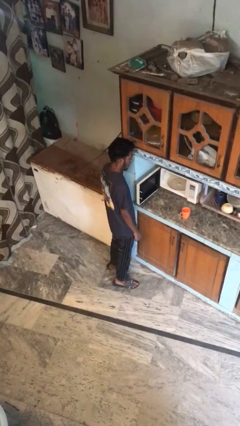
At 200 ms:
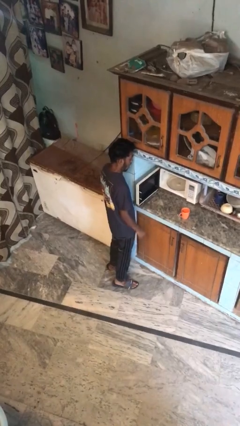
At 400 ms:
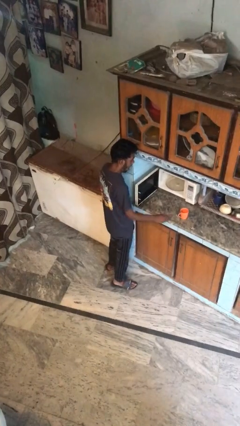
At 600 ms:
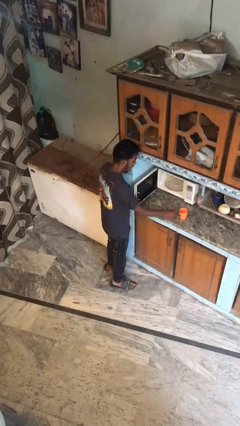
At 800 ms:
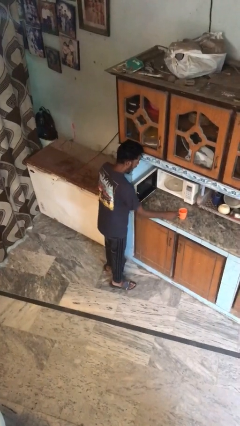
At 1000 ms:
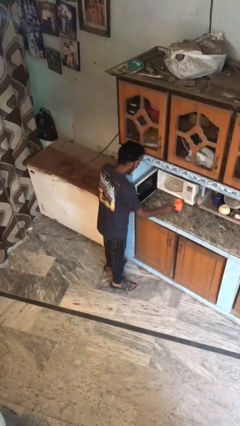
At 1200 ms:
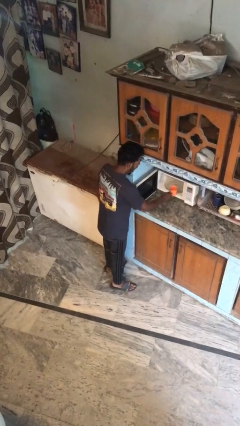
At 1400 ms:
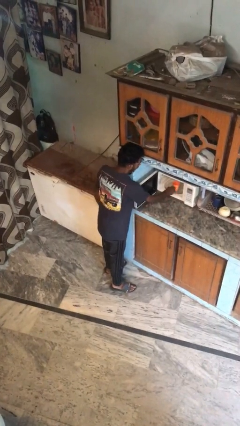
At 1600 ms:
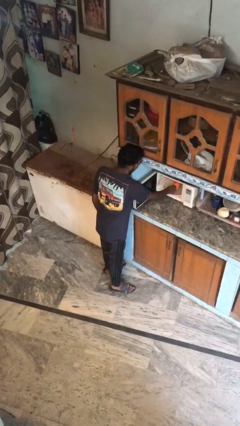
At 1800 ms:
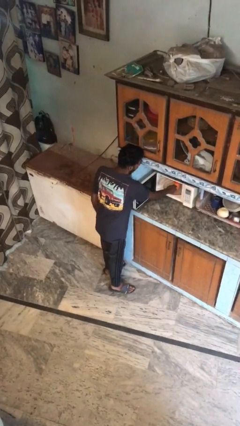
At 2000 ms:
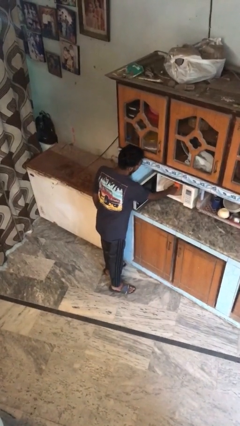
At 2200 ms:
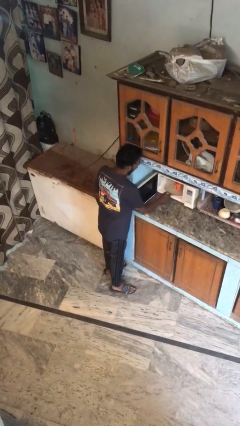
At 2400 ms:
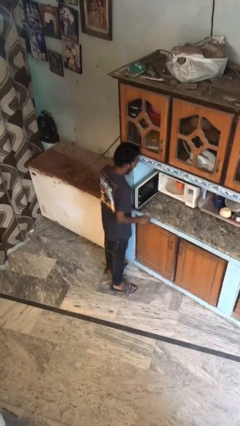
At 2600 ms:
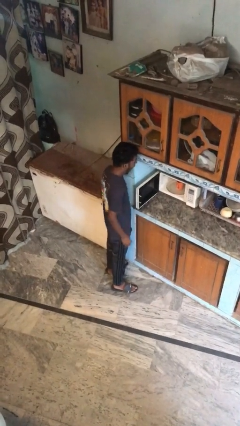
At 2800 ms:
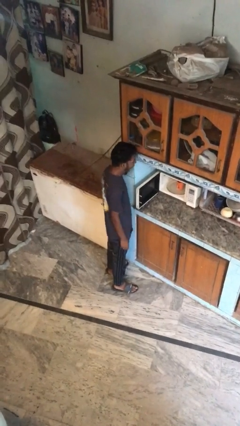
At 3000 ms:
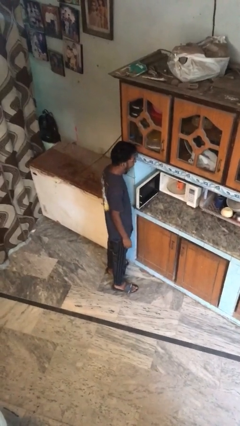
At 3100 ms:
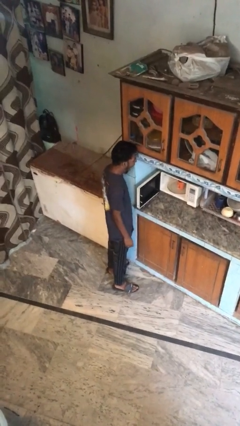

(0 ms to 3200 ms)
person puts object into microwave

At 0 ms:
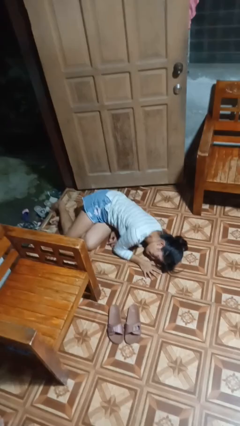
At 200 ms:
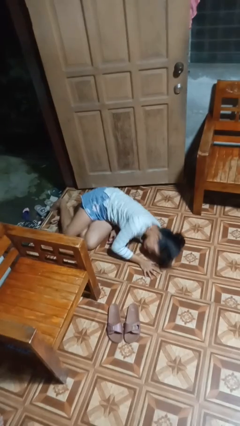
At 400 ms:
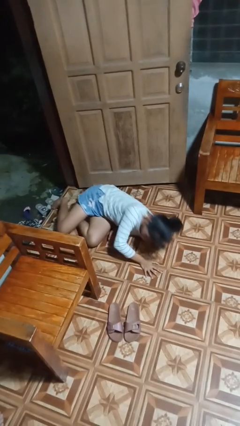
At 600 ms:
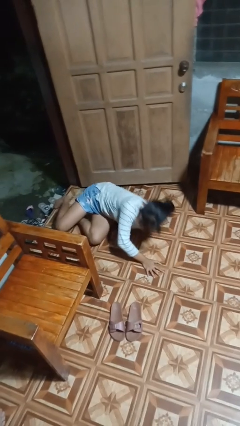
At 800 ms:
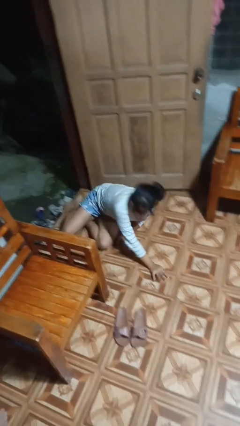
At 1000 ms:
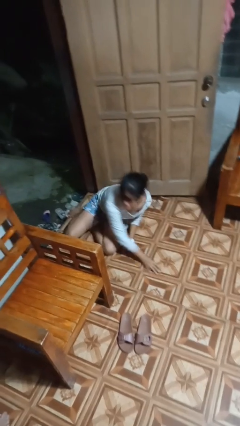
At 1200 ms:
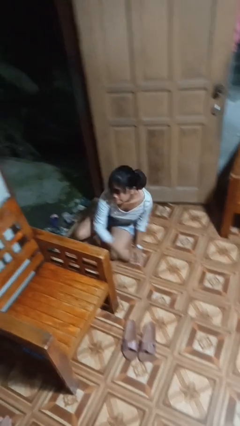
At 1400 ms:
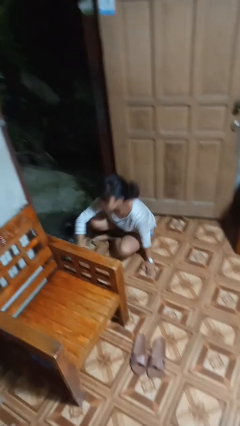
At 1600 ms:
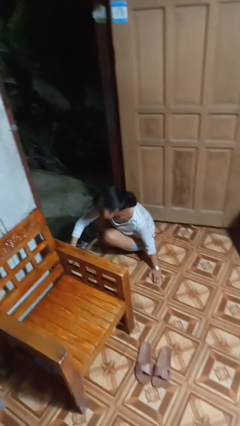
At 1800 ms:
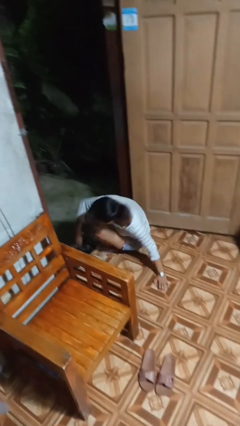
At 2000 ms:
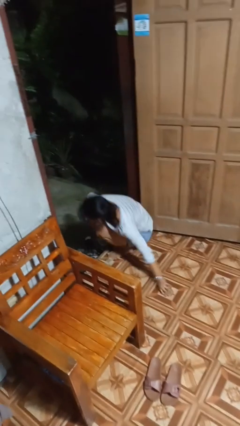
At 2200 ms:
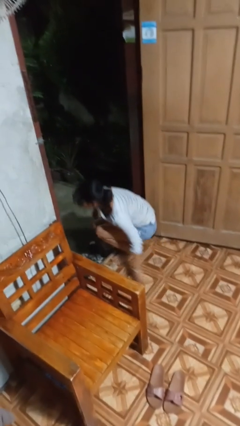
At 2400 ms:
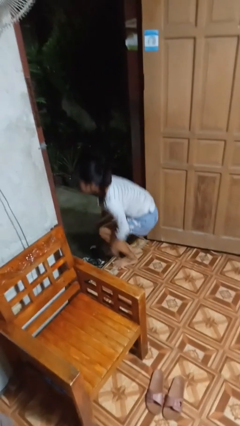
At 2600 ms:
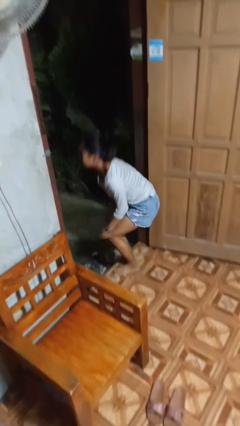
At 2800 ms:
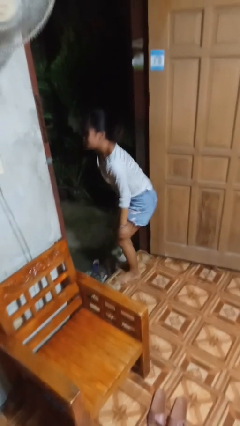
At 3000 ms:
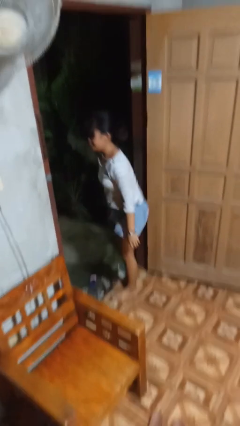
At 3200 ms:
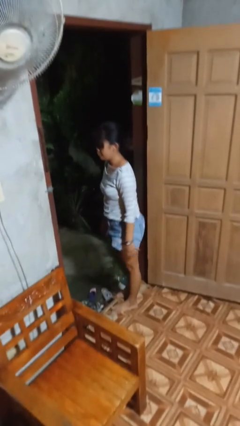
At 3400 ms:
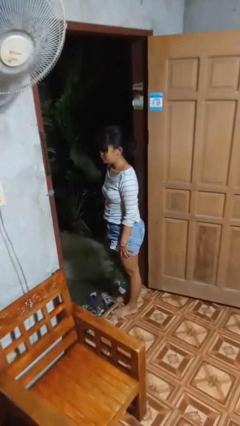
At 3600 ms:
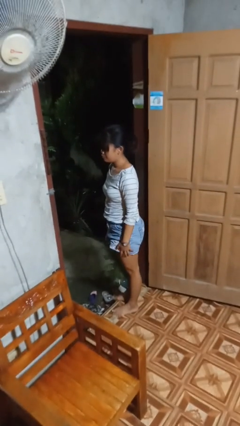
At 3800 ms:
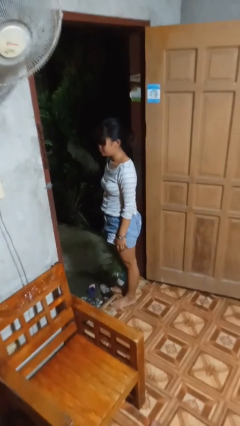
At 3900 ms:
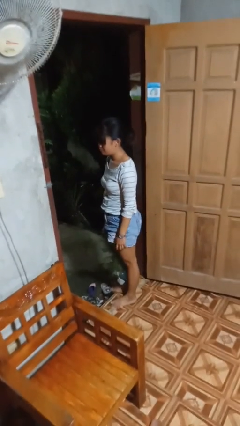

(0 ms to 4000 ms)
person stands up from floor

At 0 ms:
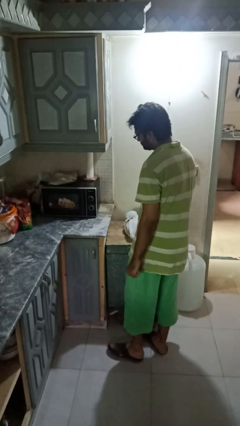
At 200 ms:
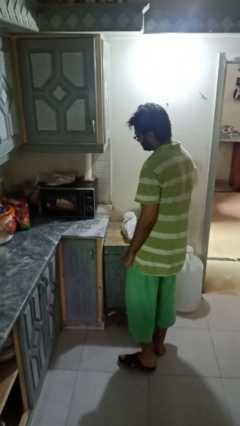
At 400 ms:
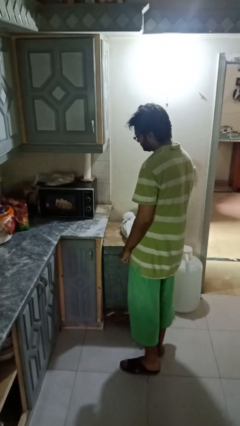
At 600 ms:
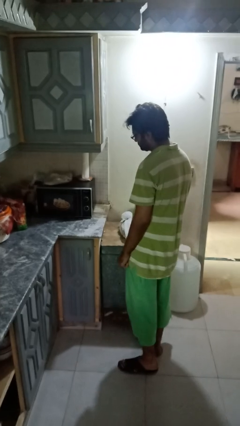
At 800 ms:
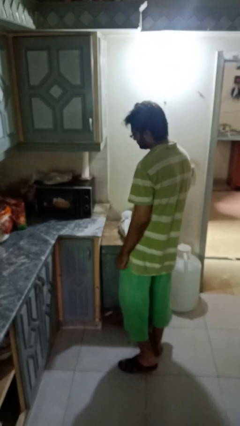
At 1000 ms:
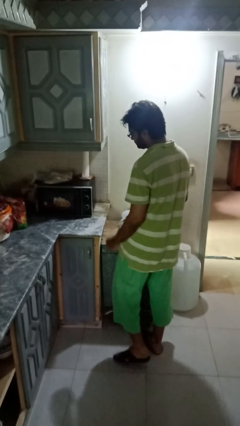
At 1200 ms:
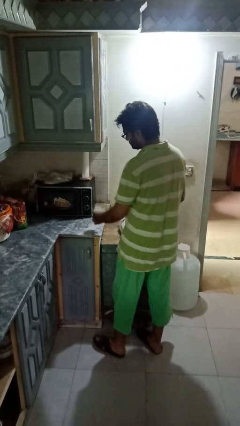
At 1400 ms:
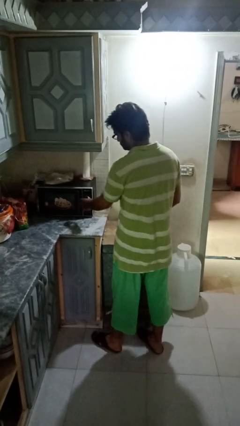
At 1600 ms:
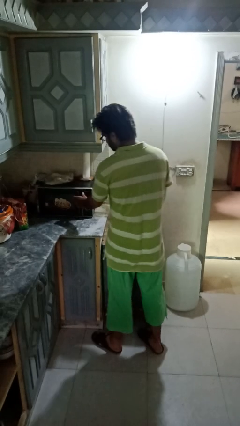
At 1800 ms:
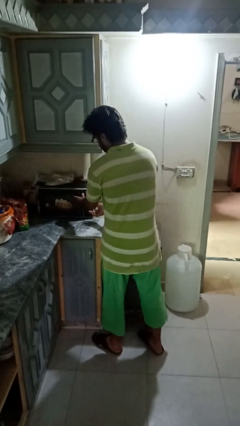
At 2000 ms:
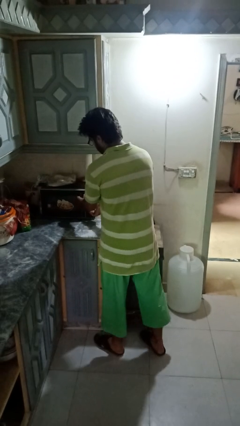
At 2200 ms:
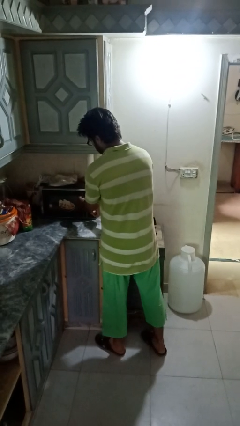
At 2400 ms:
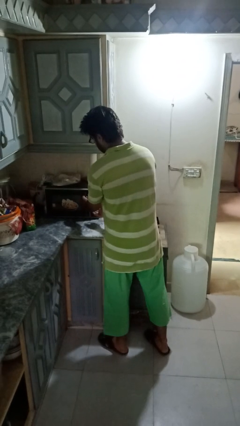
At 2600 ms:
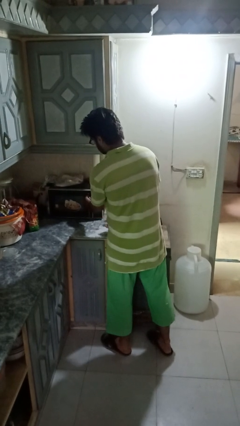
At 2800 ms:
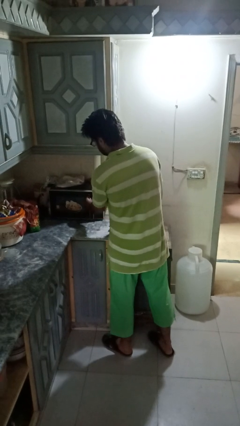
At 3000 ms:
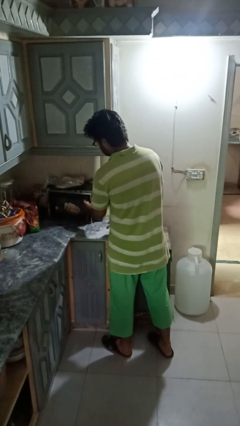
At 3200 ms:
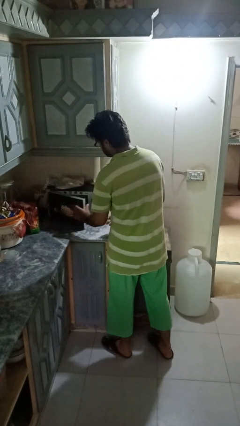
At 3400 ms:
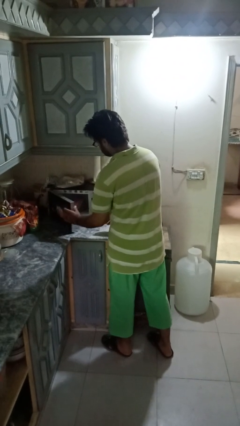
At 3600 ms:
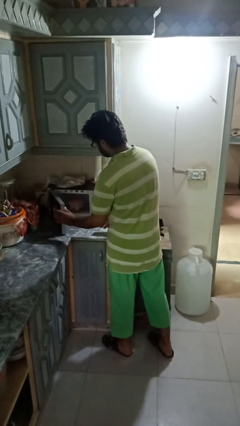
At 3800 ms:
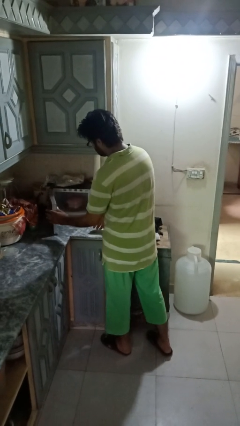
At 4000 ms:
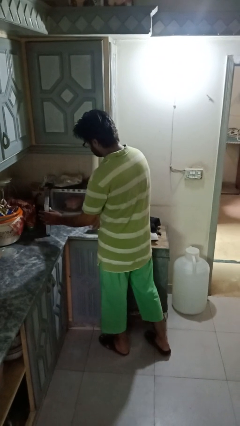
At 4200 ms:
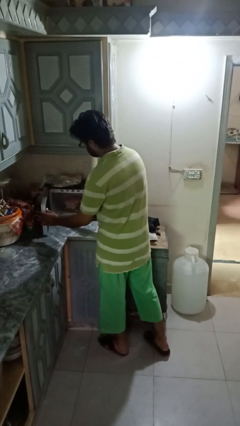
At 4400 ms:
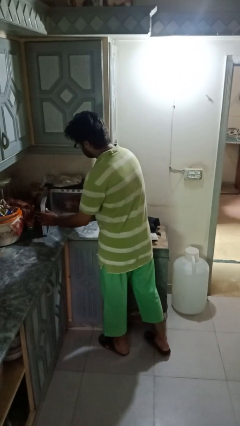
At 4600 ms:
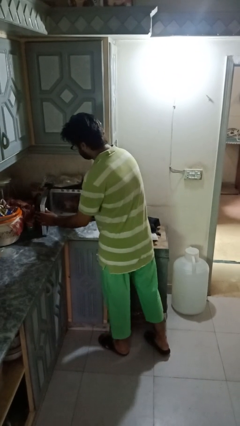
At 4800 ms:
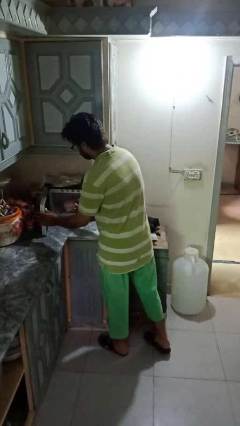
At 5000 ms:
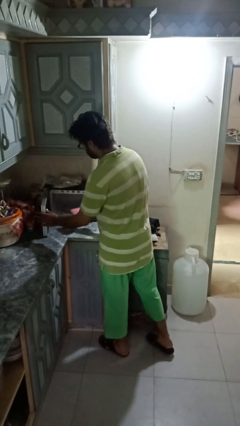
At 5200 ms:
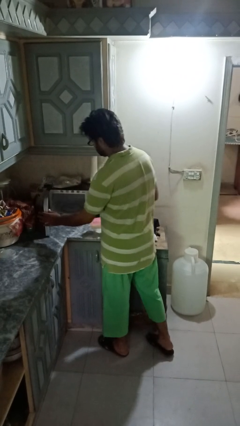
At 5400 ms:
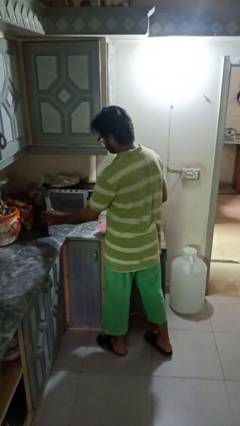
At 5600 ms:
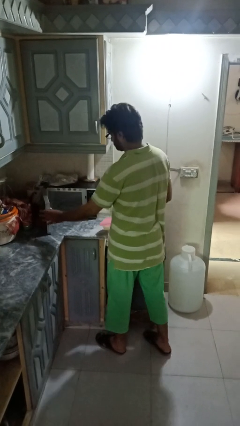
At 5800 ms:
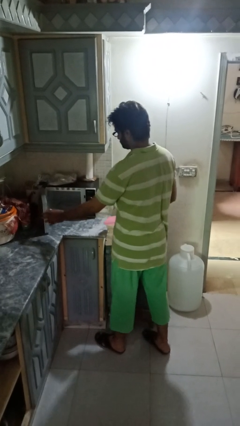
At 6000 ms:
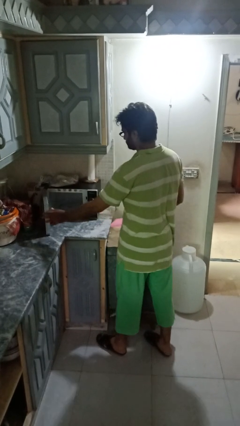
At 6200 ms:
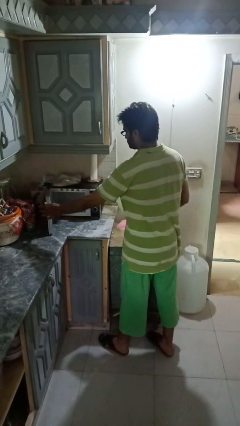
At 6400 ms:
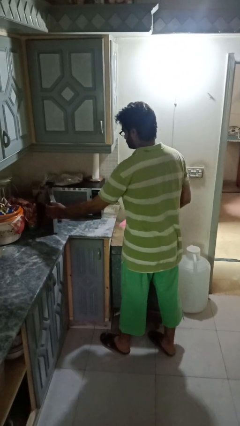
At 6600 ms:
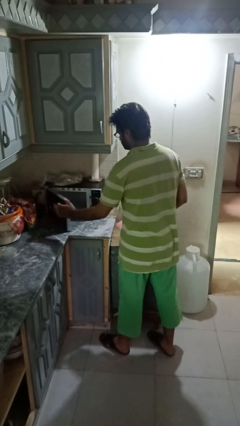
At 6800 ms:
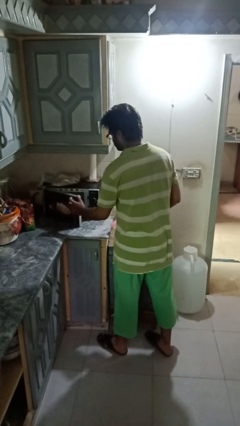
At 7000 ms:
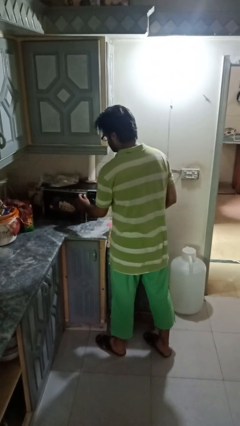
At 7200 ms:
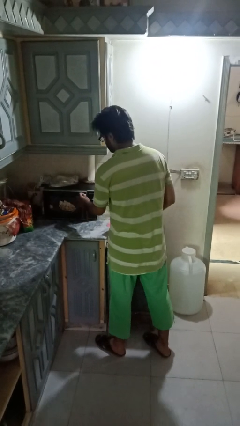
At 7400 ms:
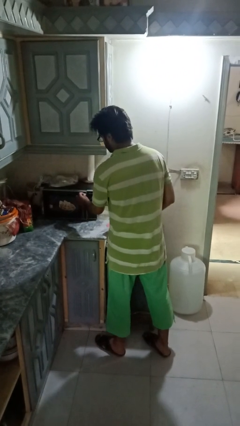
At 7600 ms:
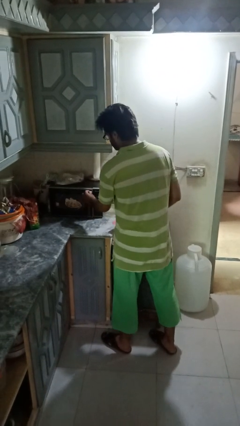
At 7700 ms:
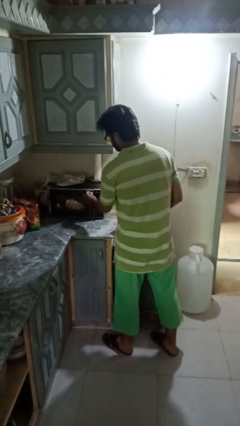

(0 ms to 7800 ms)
person takes object from microwave

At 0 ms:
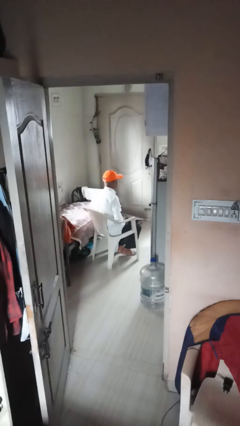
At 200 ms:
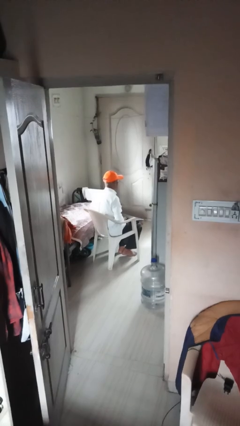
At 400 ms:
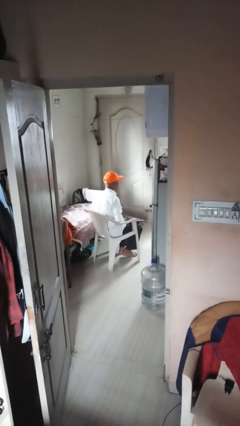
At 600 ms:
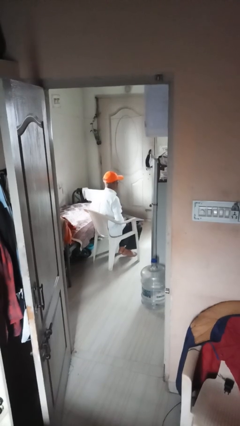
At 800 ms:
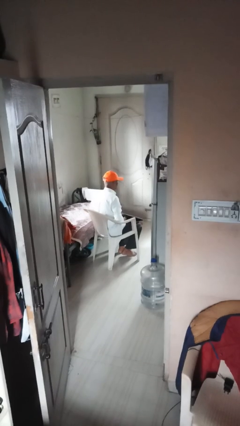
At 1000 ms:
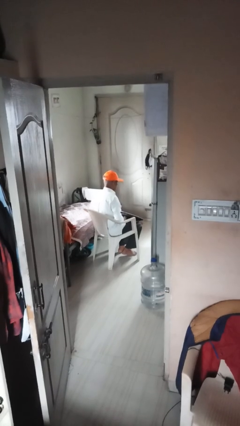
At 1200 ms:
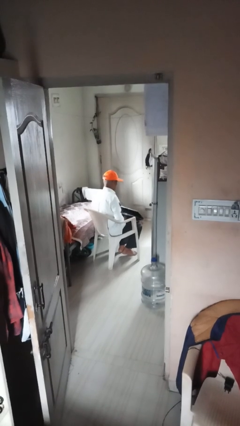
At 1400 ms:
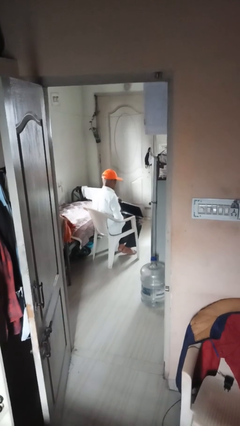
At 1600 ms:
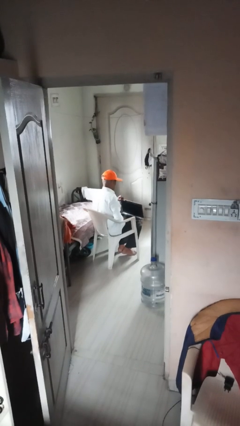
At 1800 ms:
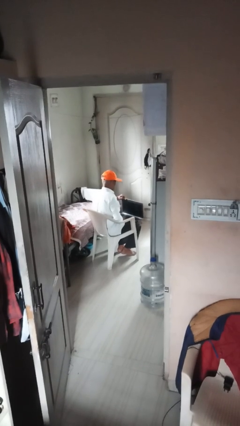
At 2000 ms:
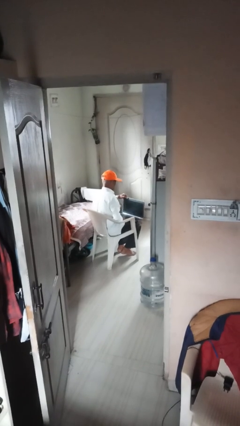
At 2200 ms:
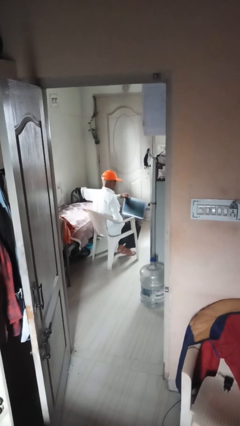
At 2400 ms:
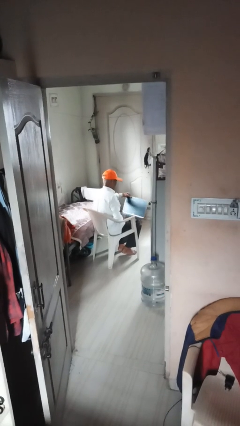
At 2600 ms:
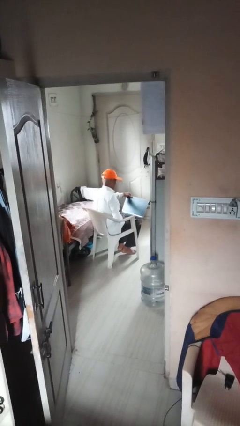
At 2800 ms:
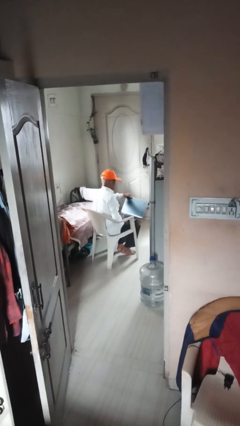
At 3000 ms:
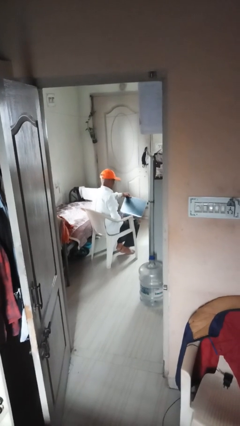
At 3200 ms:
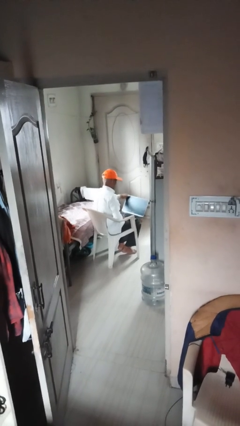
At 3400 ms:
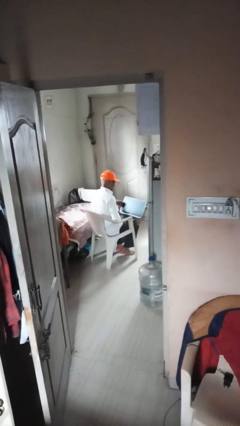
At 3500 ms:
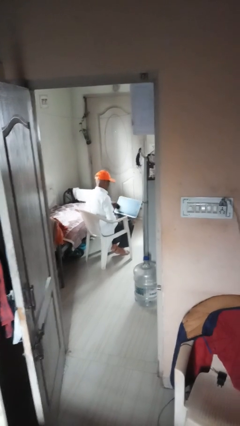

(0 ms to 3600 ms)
person opens laptop
